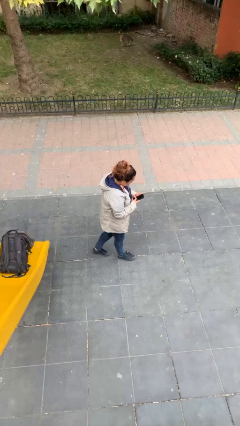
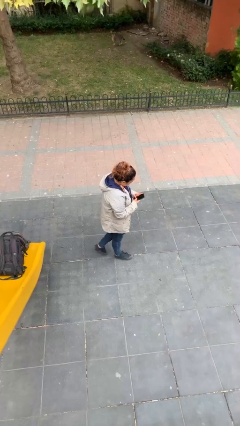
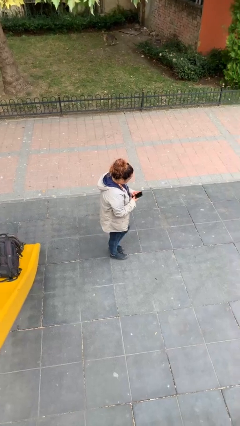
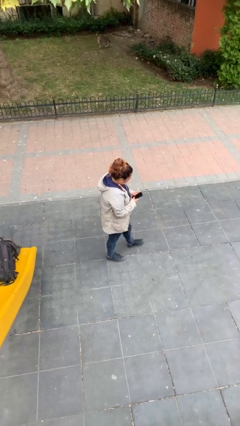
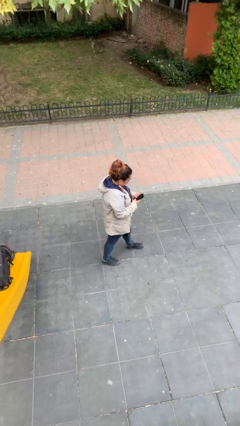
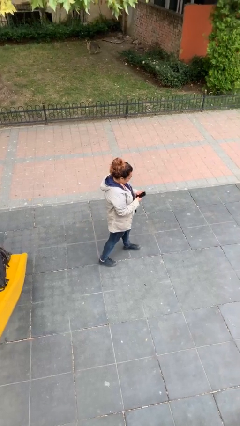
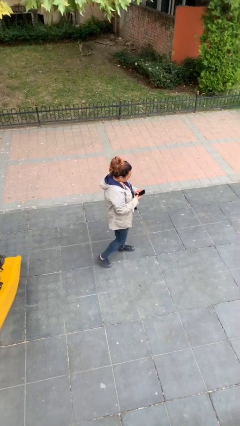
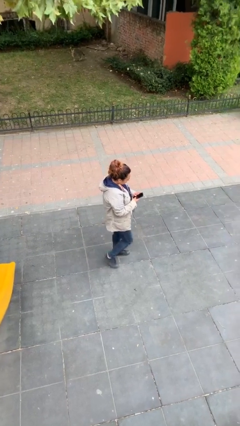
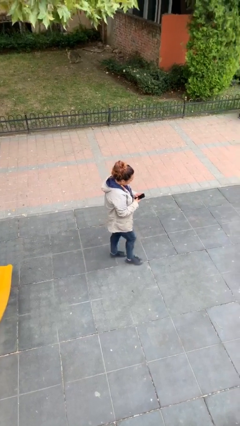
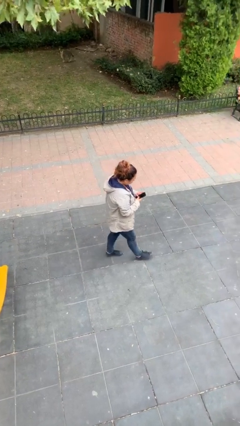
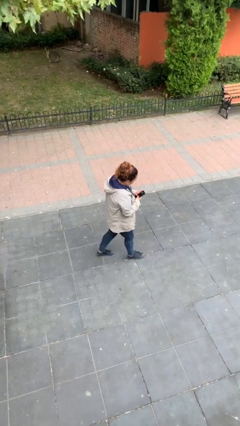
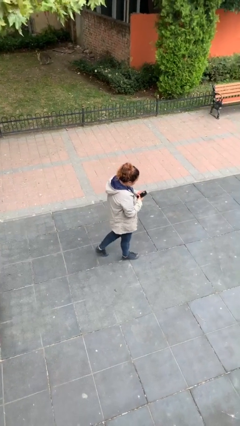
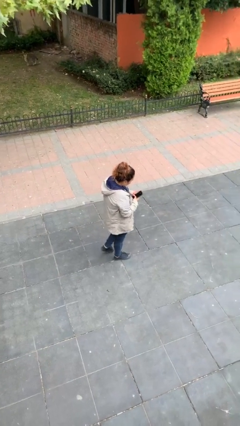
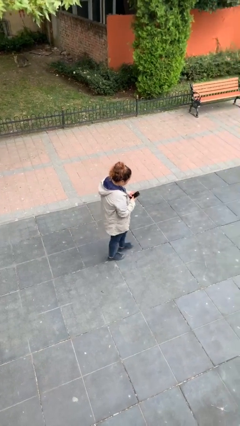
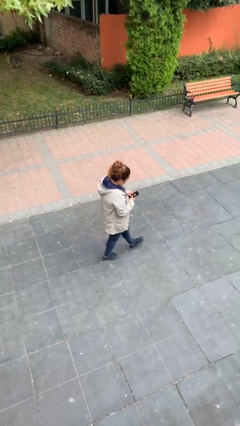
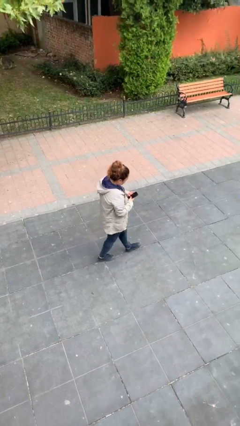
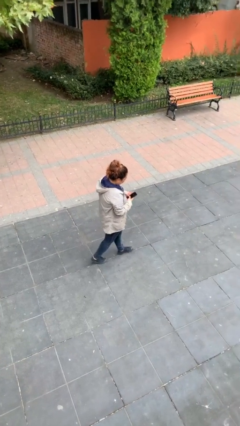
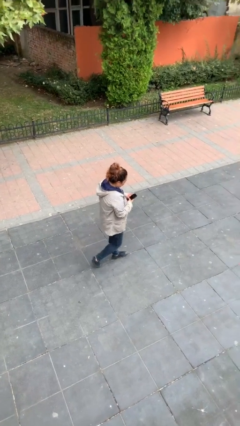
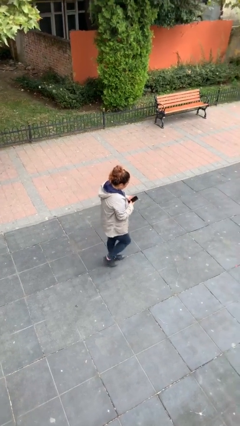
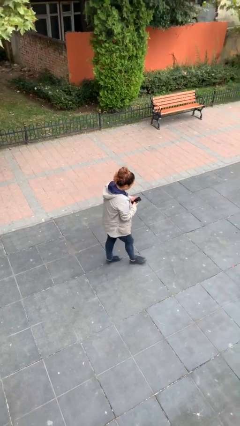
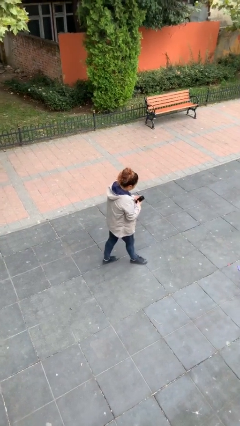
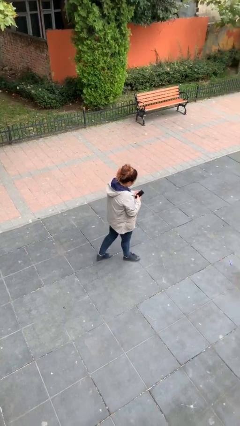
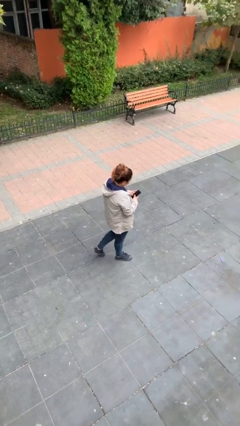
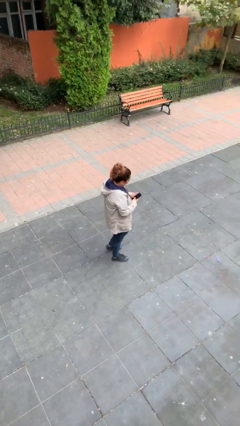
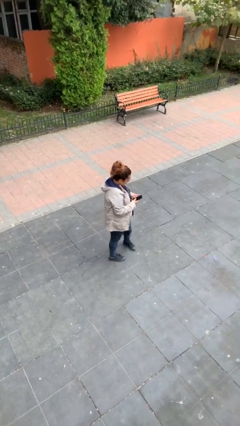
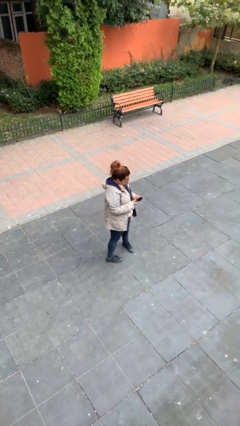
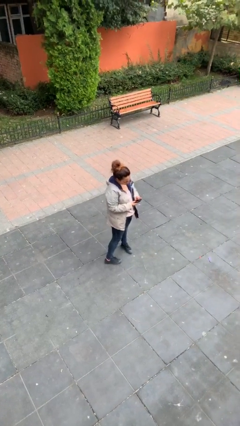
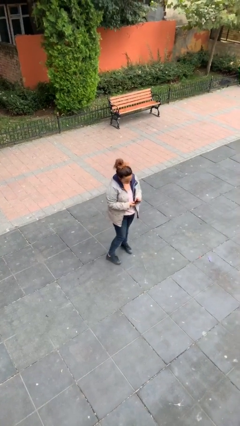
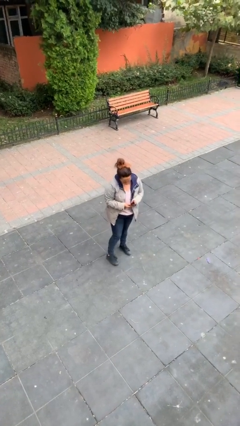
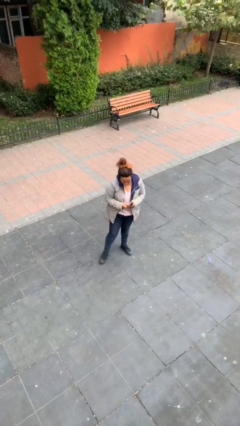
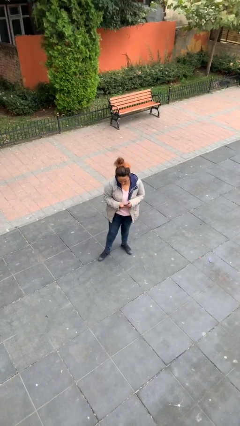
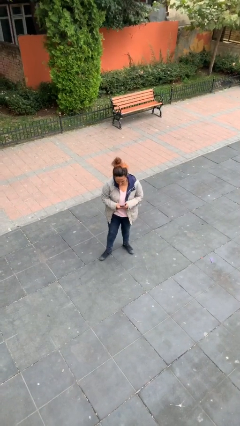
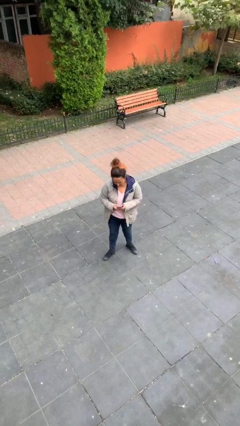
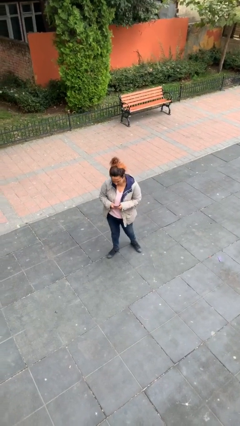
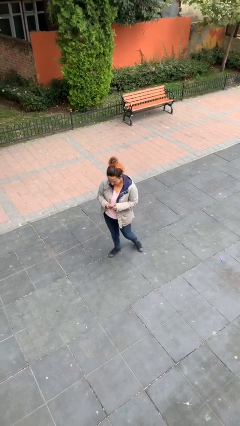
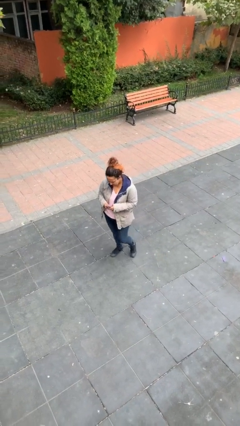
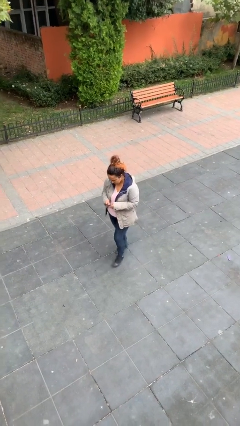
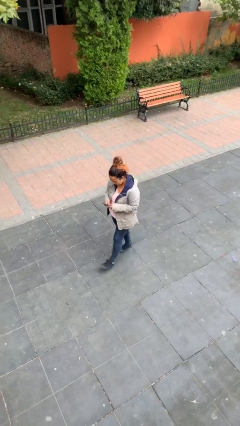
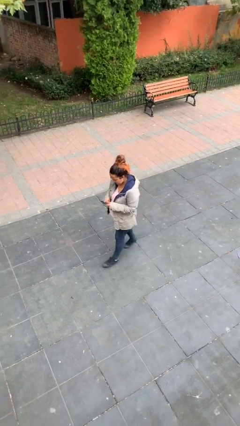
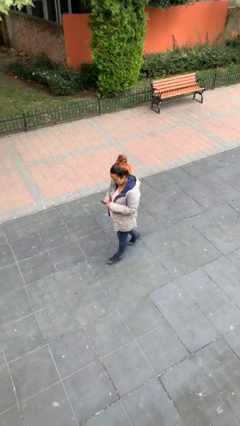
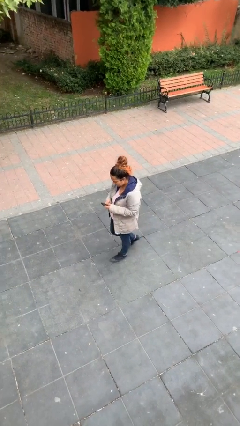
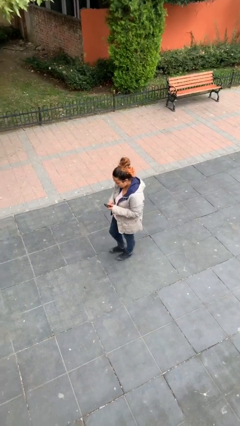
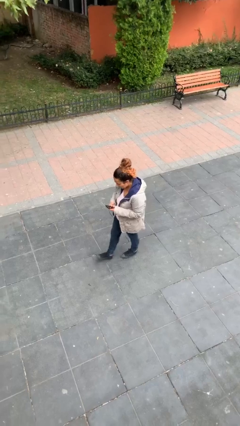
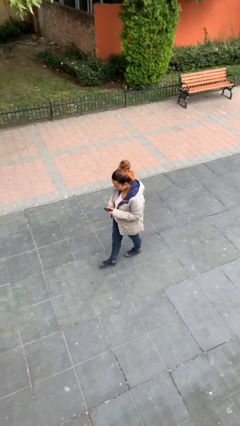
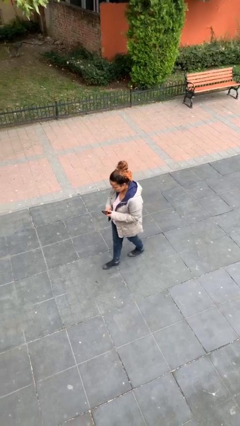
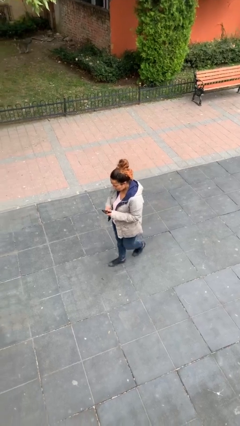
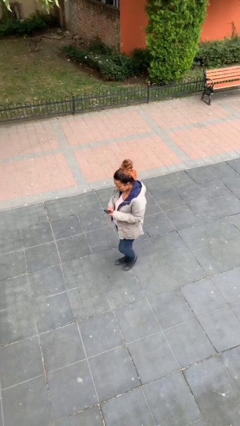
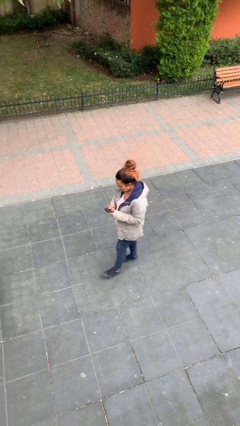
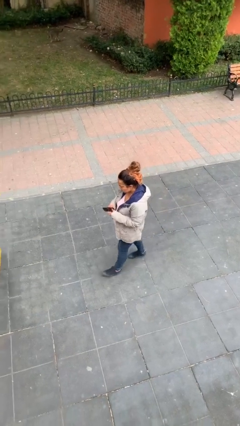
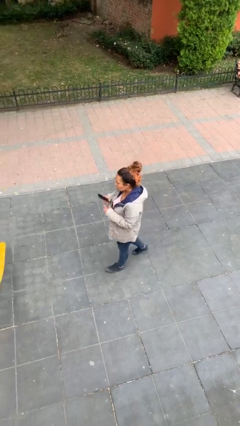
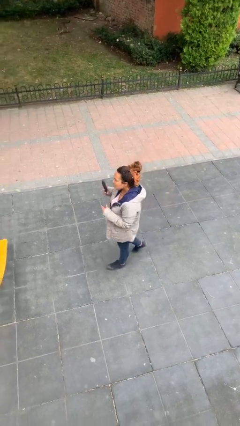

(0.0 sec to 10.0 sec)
person texts on phone

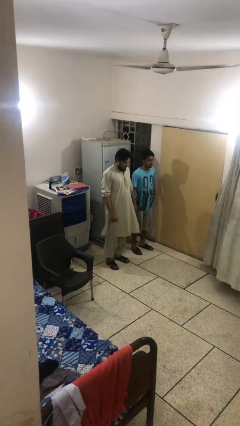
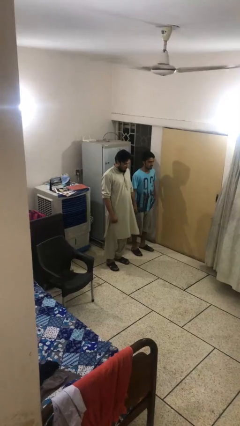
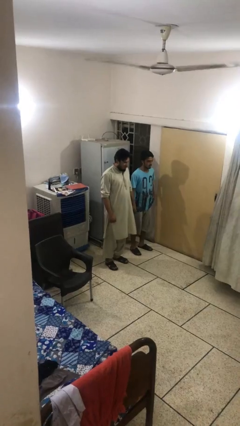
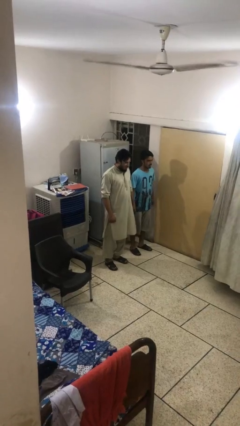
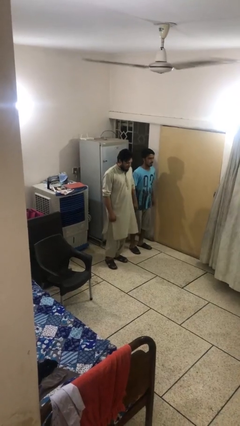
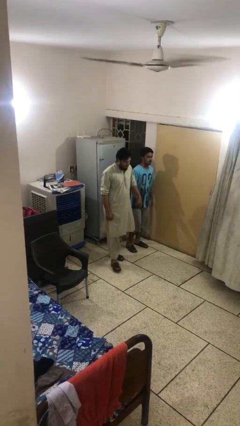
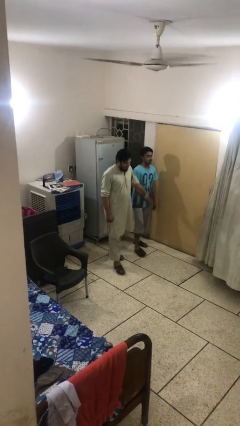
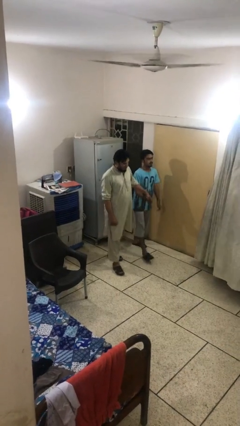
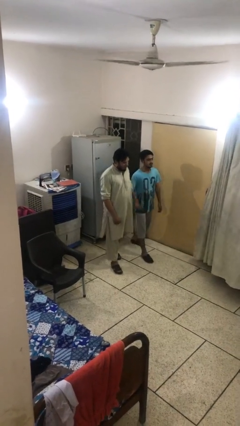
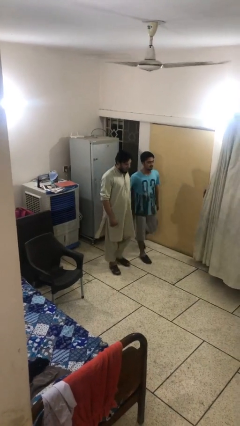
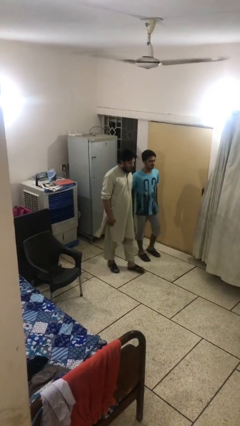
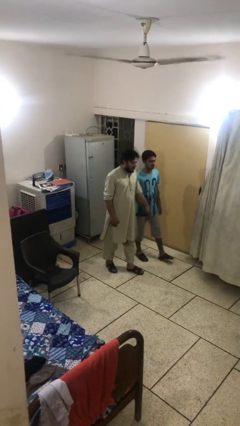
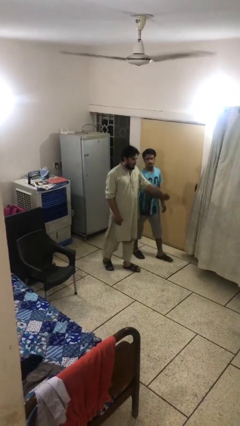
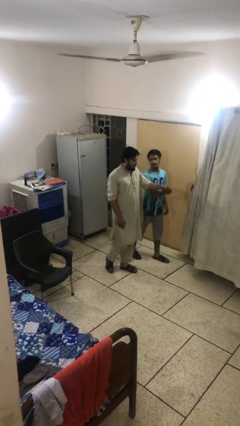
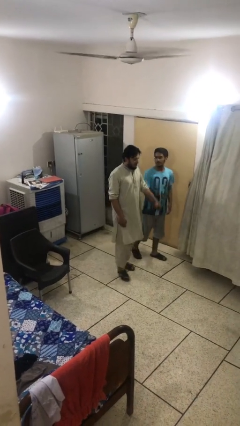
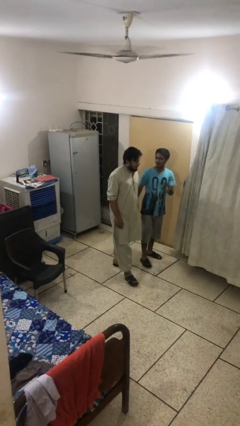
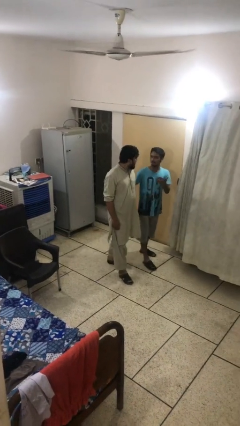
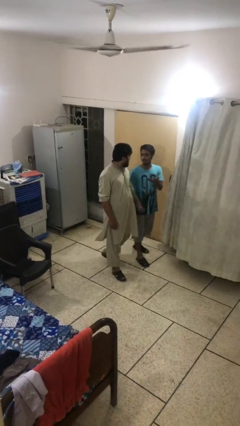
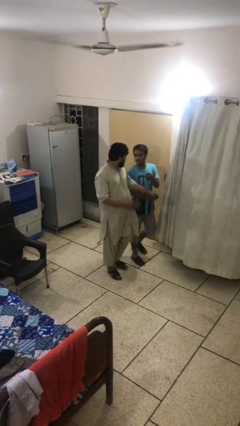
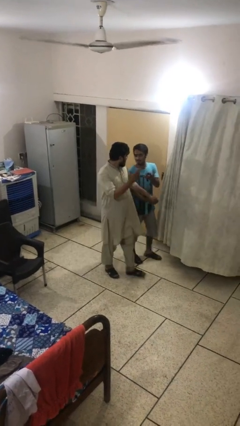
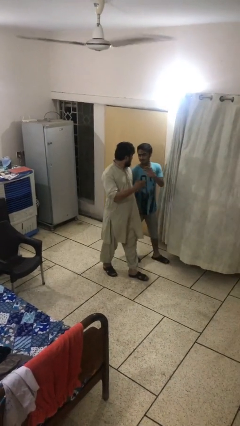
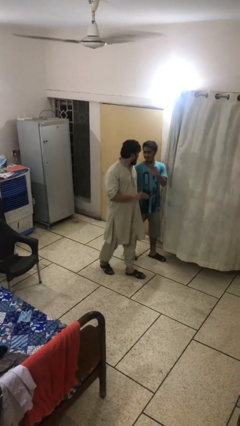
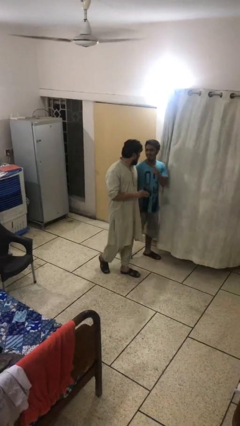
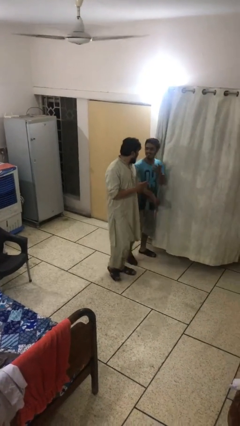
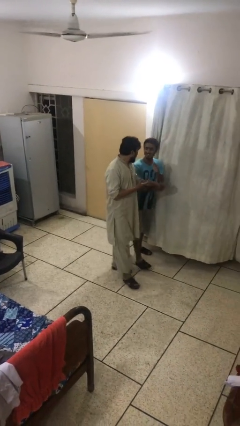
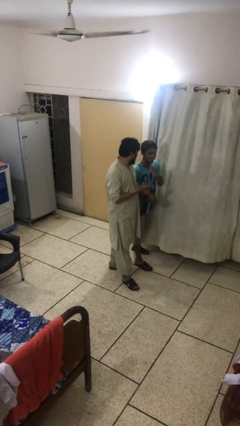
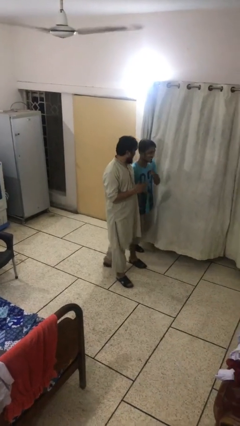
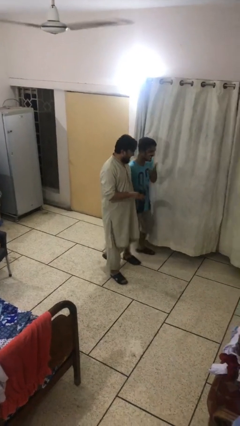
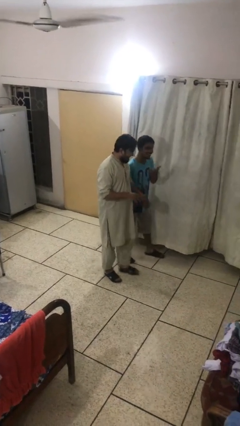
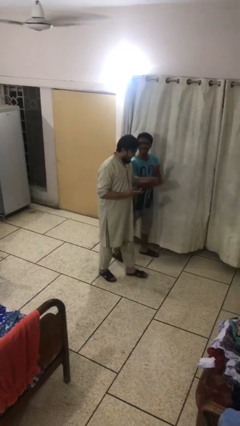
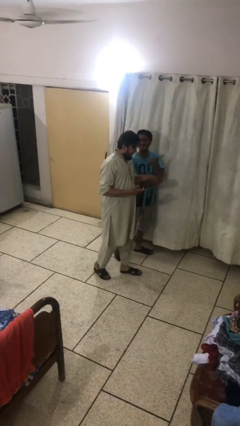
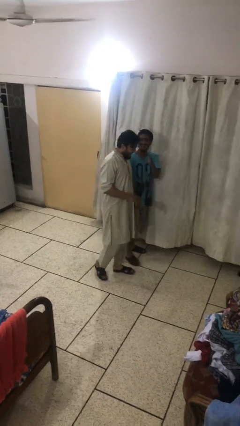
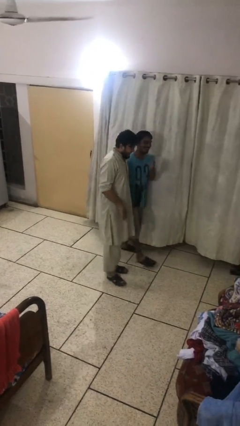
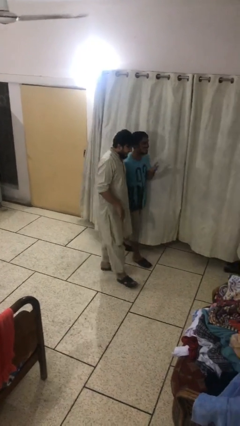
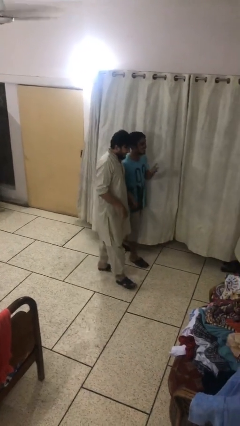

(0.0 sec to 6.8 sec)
person holds hand

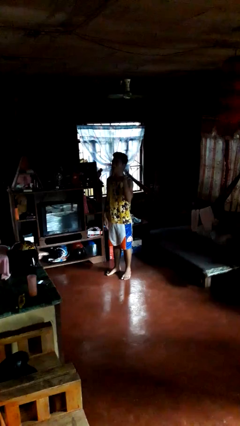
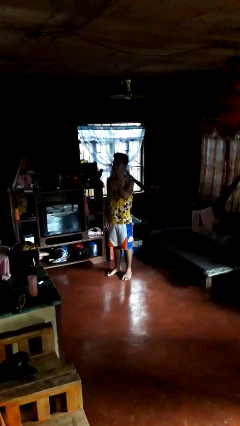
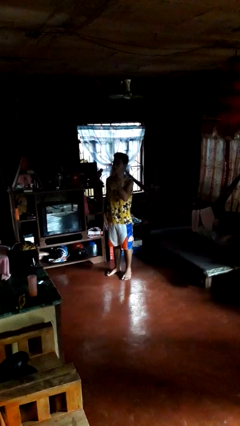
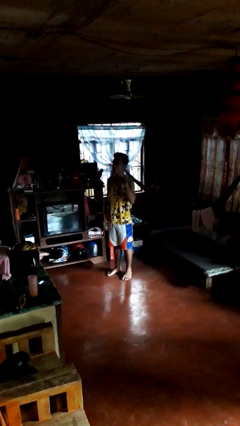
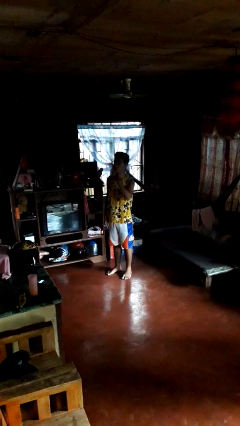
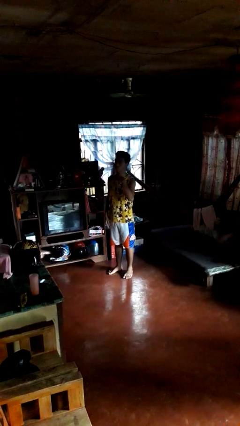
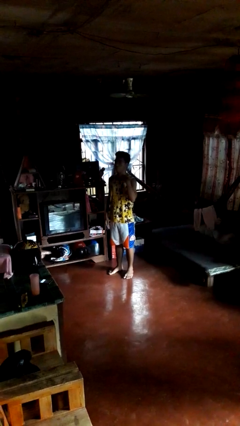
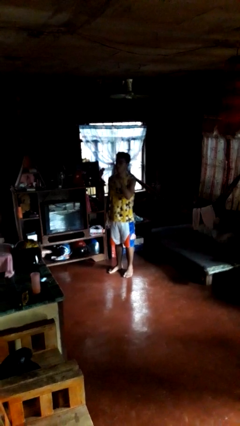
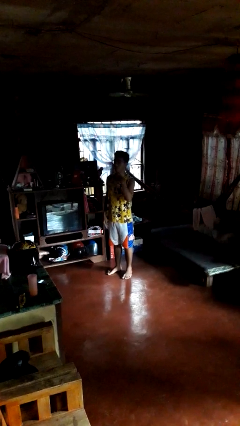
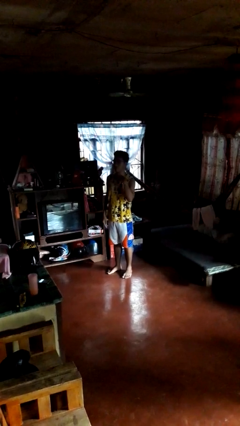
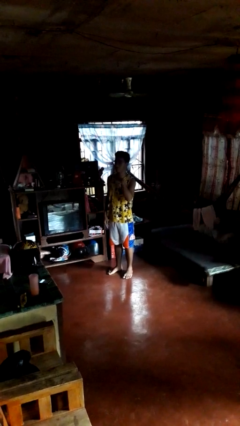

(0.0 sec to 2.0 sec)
person gestures cut
